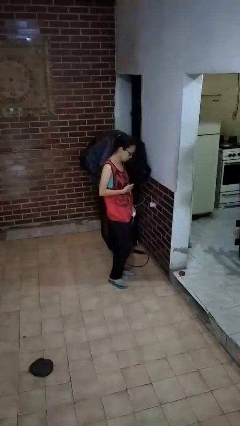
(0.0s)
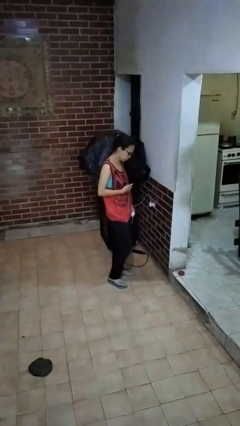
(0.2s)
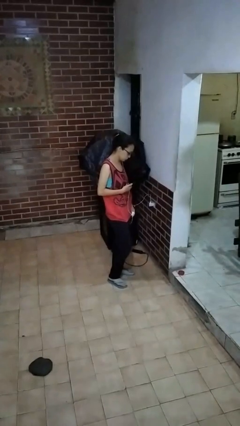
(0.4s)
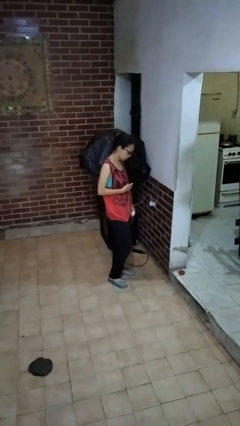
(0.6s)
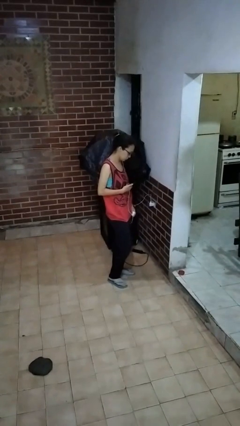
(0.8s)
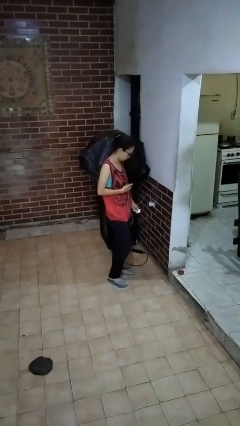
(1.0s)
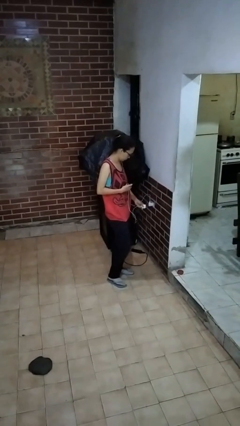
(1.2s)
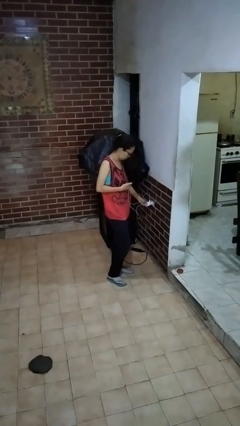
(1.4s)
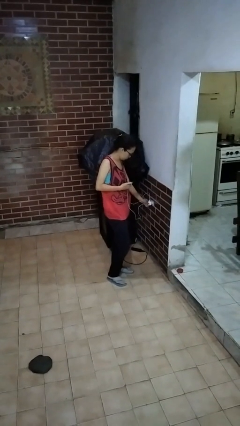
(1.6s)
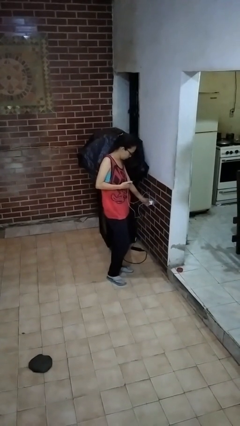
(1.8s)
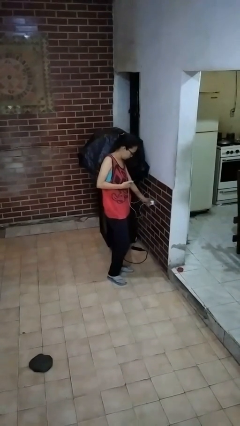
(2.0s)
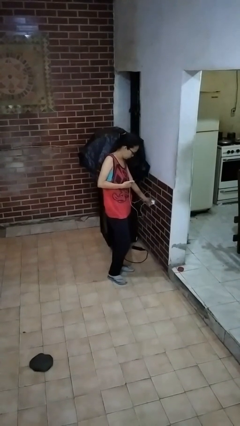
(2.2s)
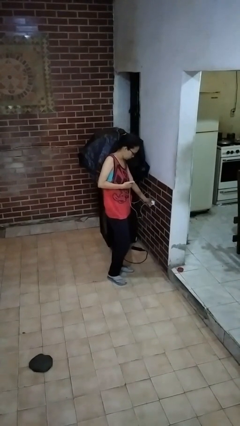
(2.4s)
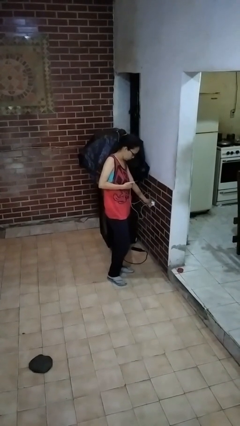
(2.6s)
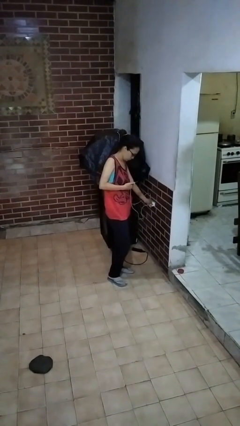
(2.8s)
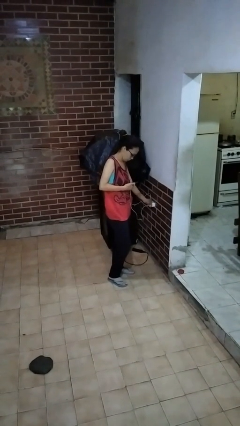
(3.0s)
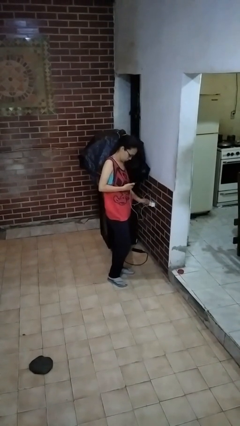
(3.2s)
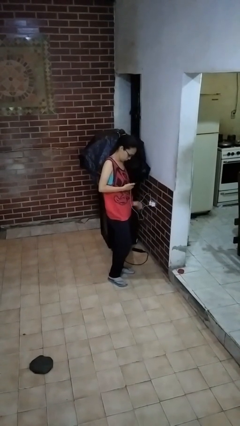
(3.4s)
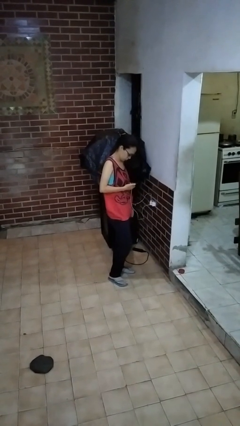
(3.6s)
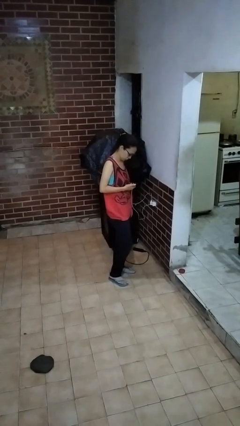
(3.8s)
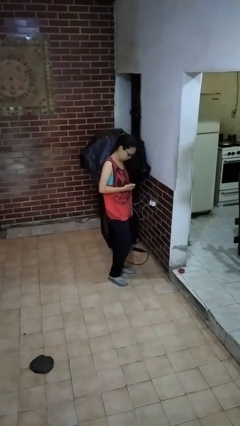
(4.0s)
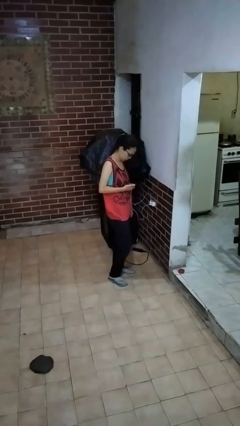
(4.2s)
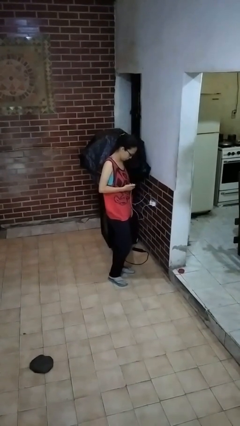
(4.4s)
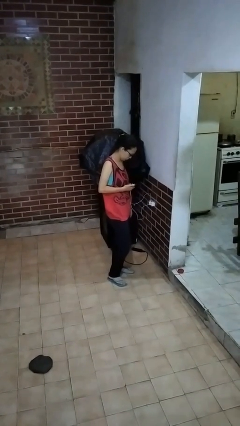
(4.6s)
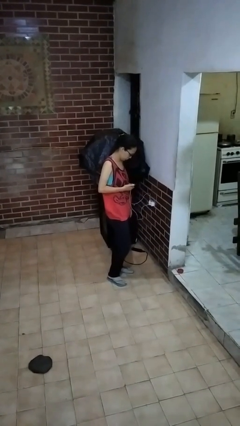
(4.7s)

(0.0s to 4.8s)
person plugs into electrical socket

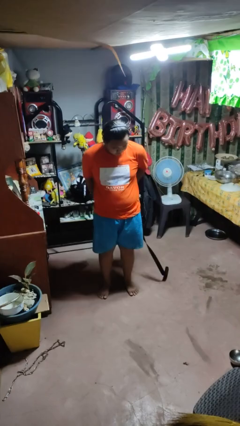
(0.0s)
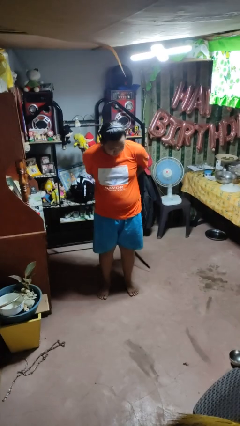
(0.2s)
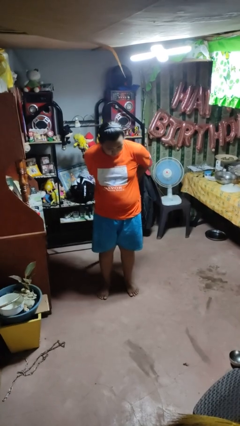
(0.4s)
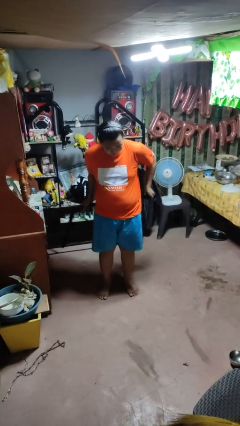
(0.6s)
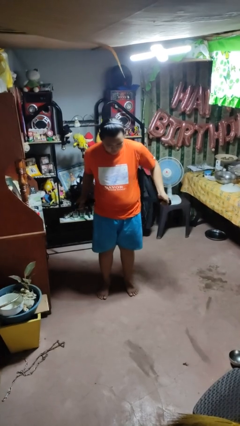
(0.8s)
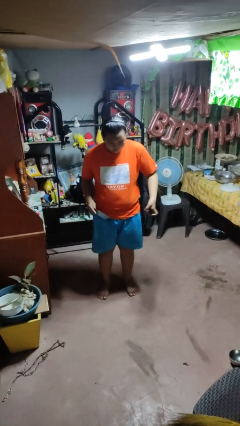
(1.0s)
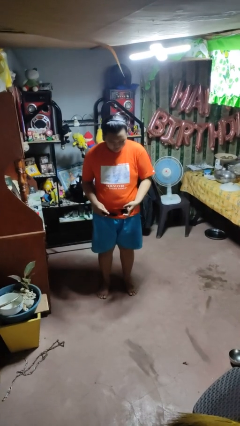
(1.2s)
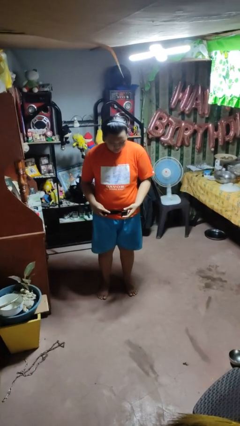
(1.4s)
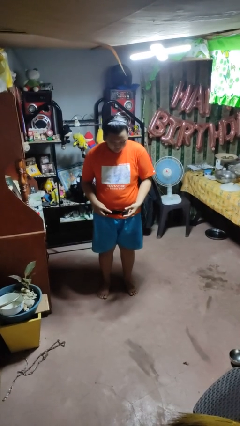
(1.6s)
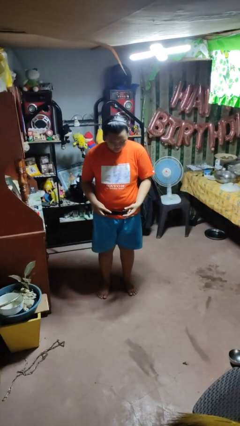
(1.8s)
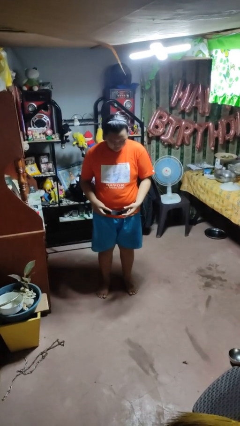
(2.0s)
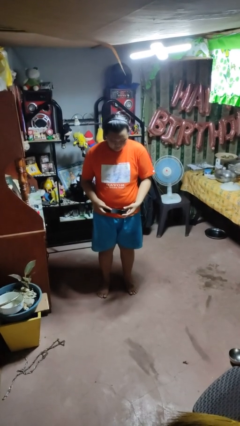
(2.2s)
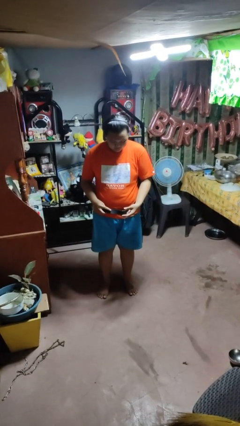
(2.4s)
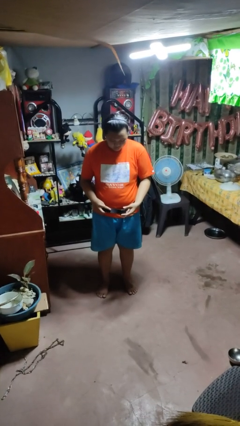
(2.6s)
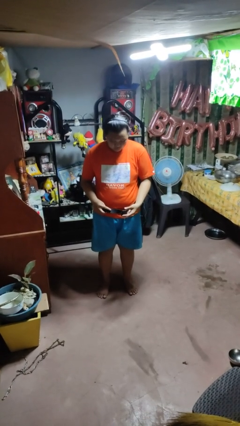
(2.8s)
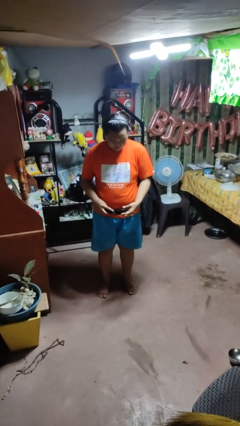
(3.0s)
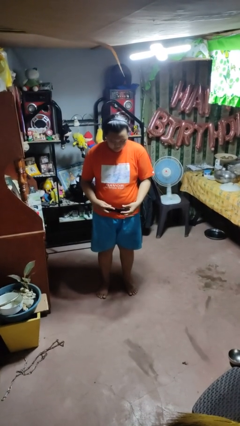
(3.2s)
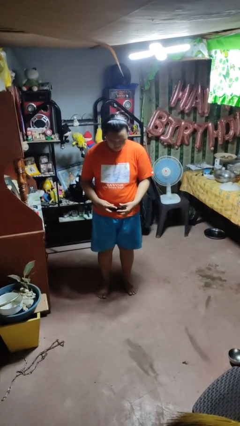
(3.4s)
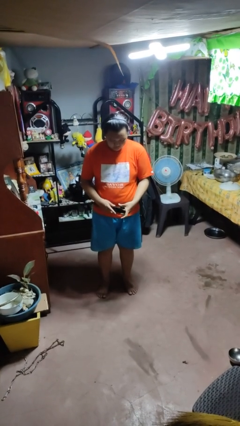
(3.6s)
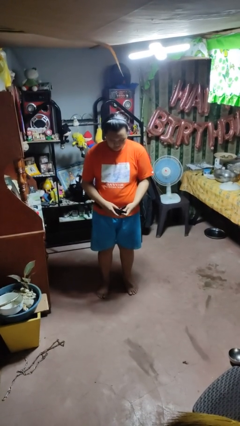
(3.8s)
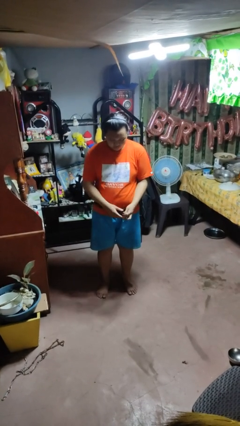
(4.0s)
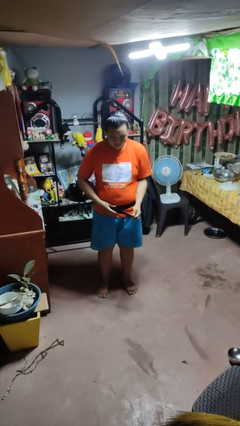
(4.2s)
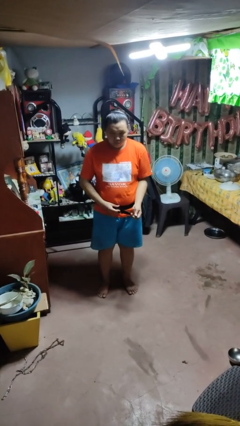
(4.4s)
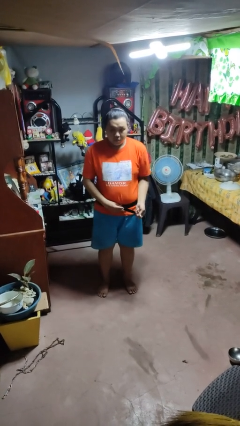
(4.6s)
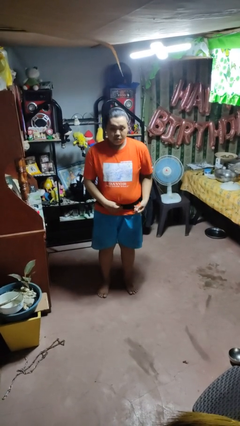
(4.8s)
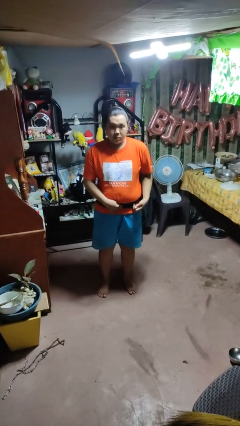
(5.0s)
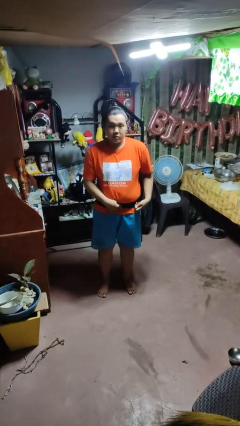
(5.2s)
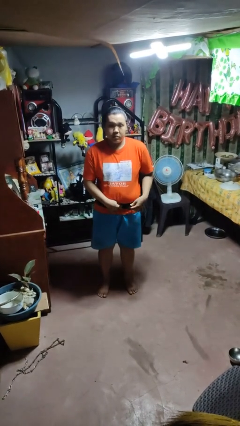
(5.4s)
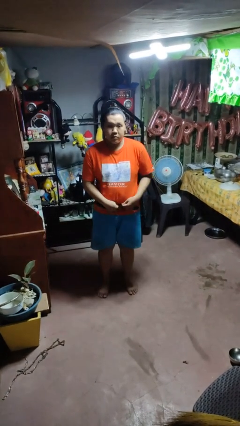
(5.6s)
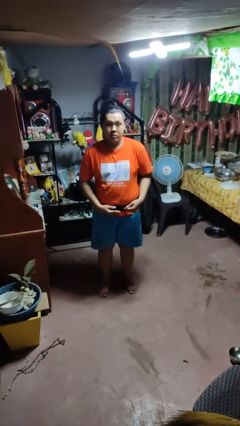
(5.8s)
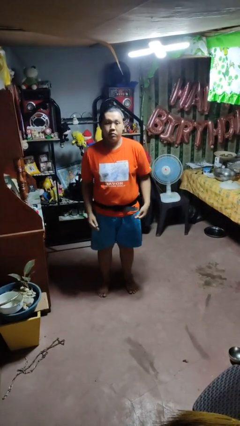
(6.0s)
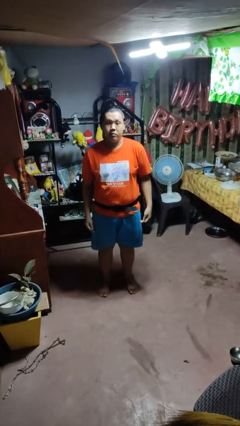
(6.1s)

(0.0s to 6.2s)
person puts on belt

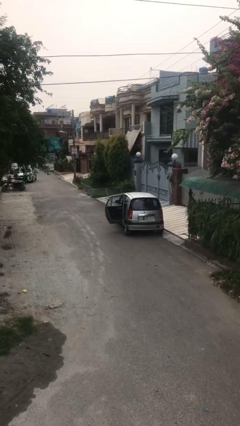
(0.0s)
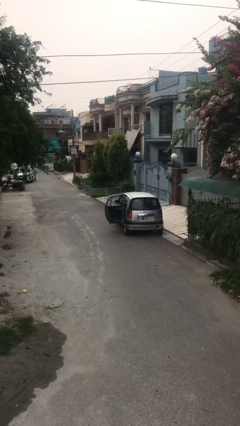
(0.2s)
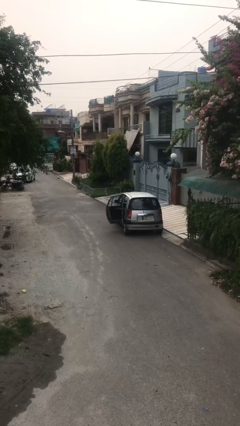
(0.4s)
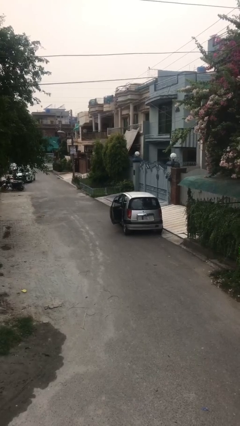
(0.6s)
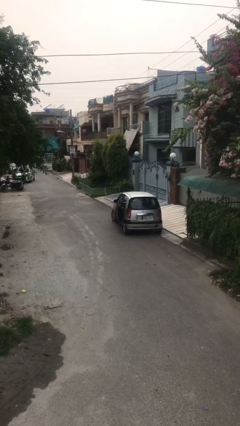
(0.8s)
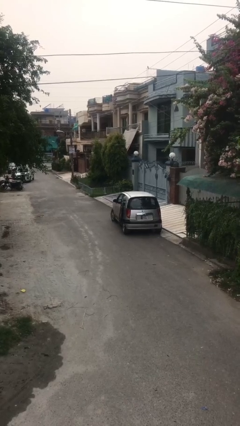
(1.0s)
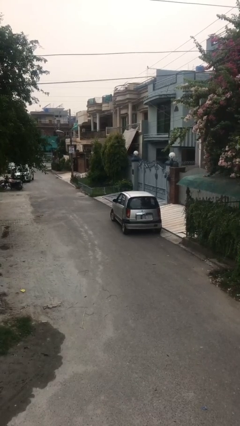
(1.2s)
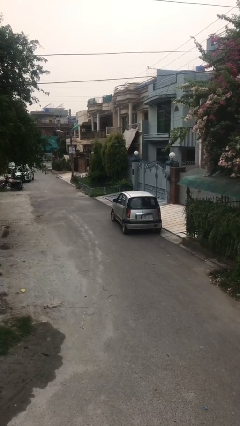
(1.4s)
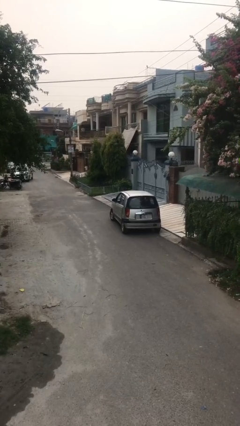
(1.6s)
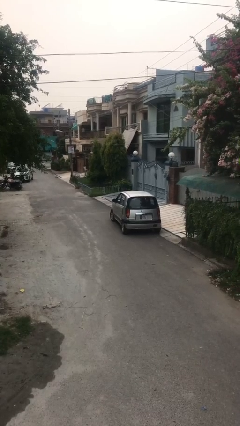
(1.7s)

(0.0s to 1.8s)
person closes car door

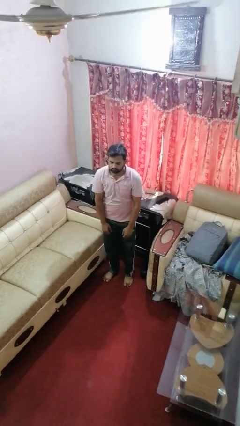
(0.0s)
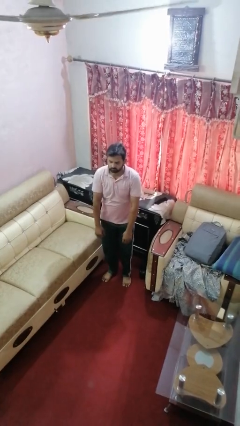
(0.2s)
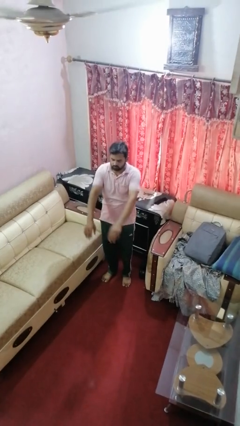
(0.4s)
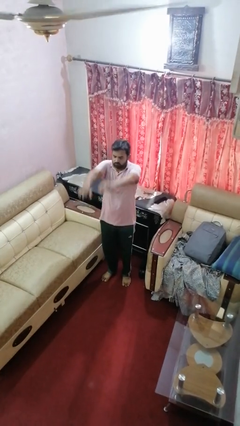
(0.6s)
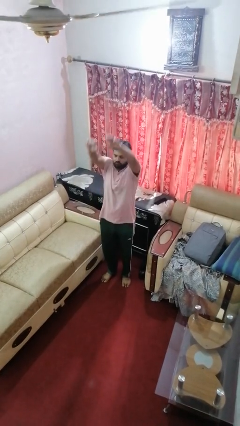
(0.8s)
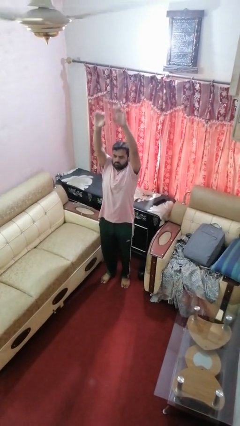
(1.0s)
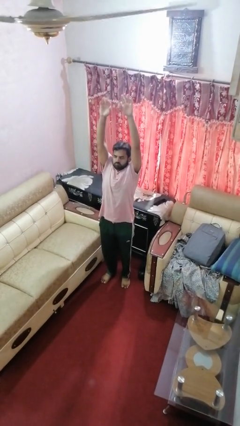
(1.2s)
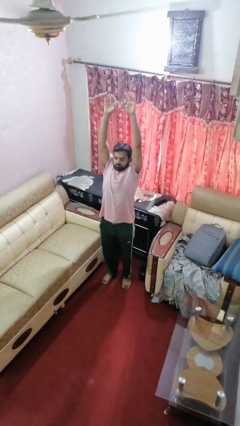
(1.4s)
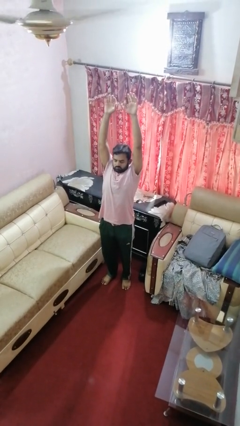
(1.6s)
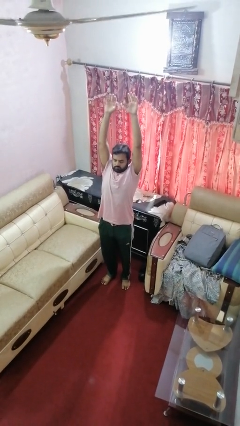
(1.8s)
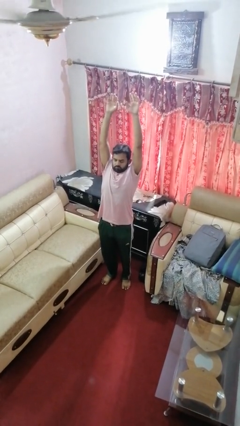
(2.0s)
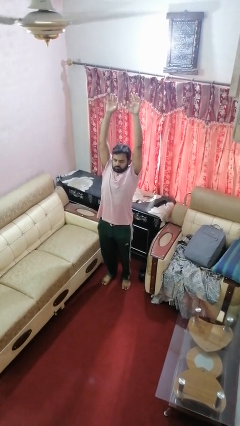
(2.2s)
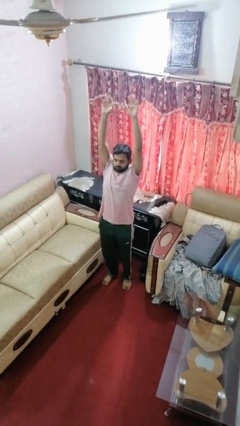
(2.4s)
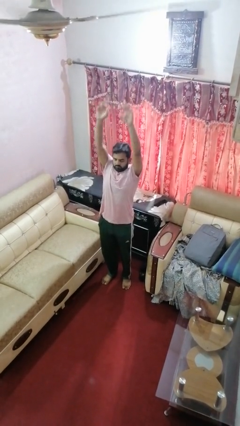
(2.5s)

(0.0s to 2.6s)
person stretches arms over head

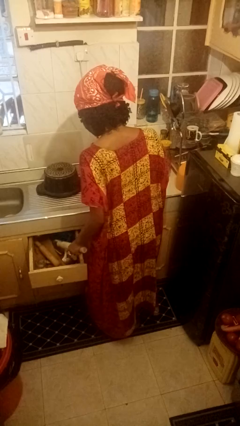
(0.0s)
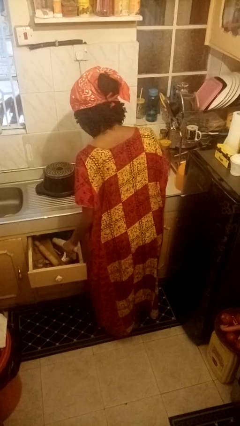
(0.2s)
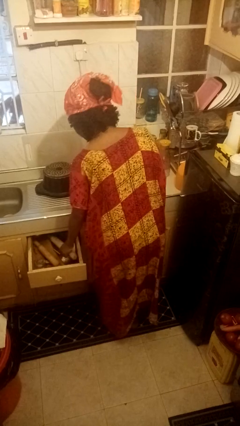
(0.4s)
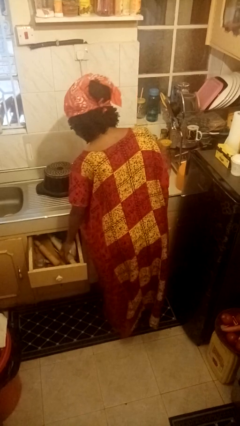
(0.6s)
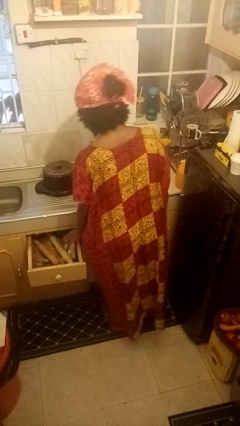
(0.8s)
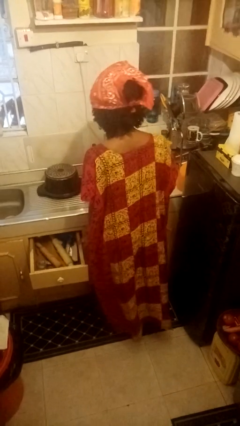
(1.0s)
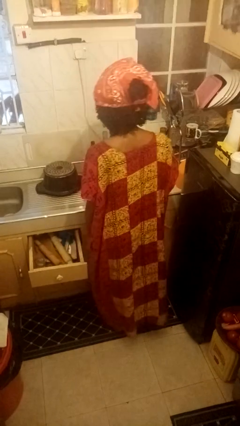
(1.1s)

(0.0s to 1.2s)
person puts object into kitchen drawer

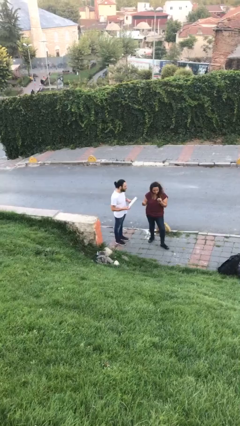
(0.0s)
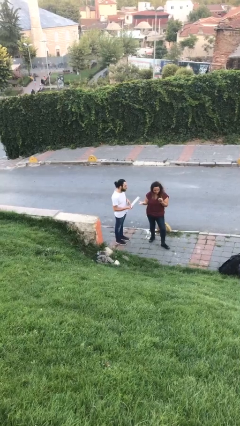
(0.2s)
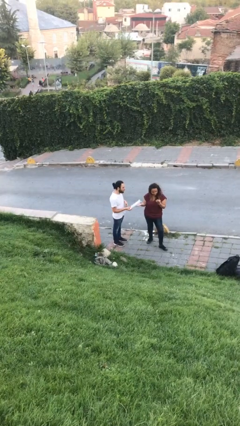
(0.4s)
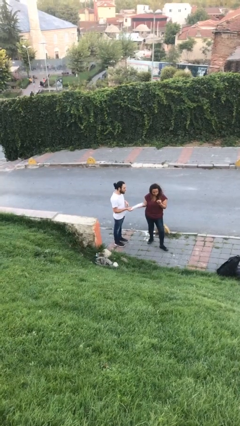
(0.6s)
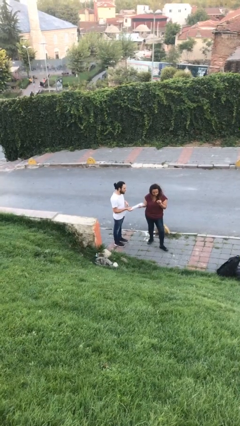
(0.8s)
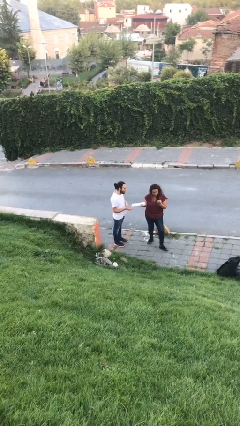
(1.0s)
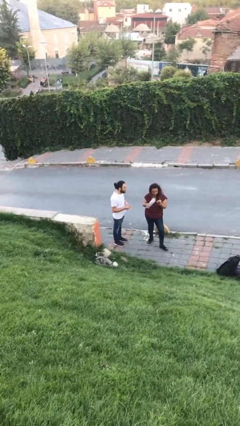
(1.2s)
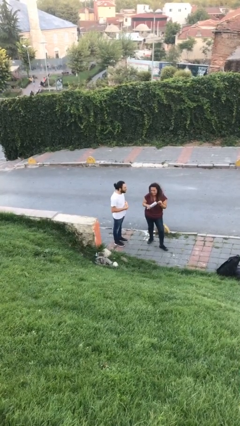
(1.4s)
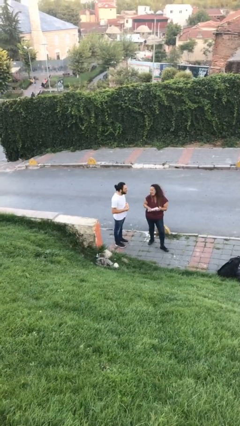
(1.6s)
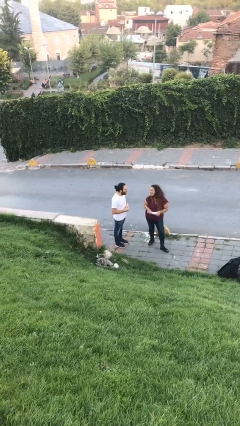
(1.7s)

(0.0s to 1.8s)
person transfers object to person
